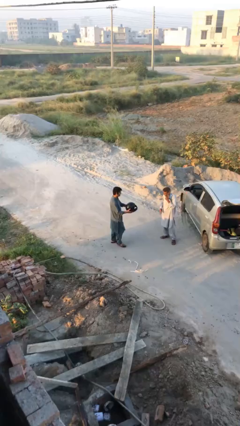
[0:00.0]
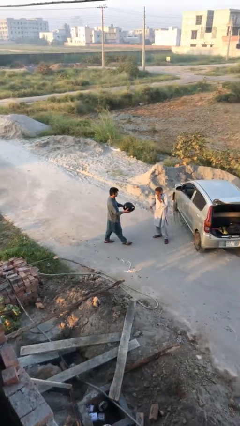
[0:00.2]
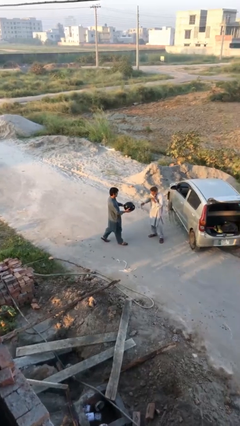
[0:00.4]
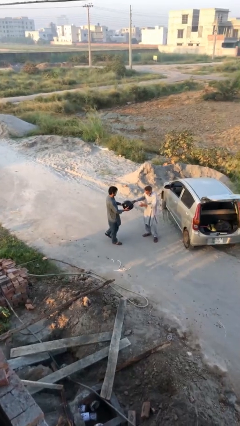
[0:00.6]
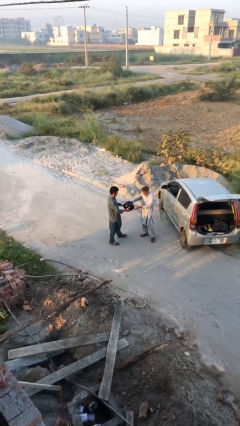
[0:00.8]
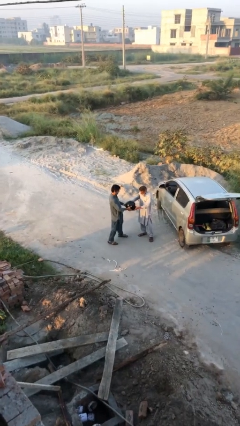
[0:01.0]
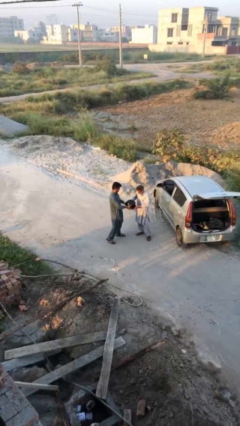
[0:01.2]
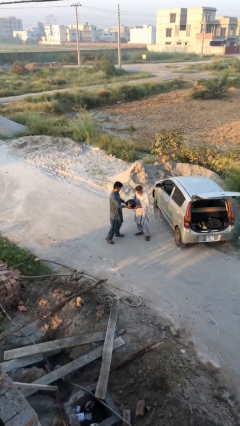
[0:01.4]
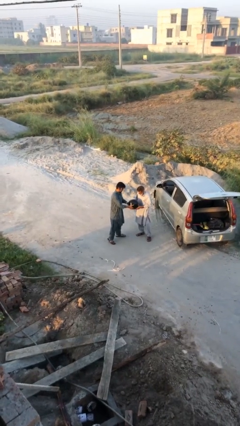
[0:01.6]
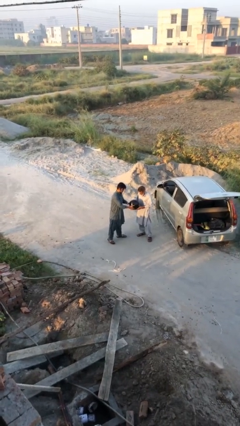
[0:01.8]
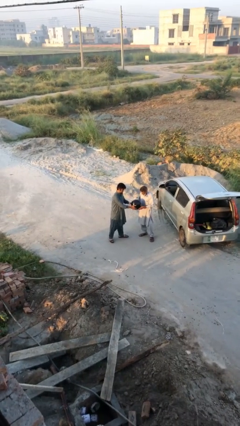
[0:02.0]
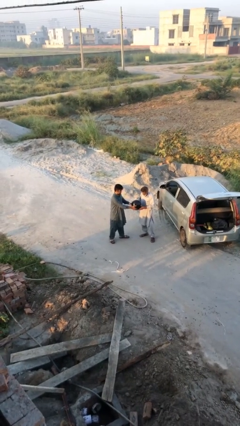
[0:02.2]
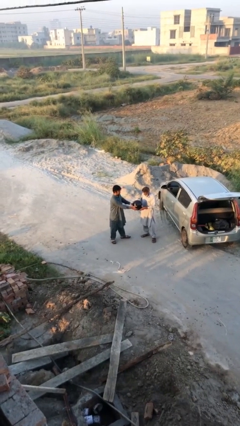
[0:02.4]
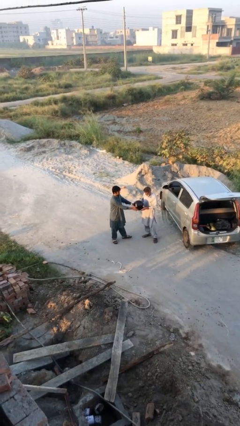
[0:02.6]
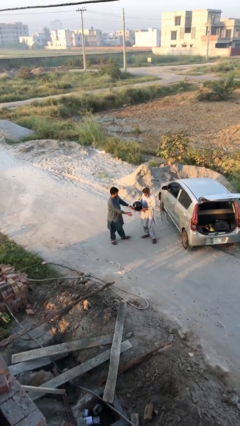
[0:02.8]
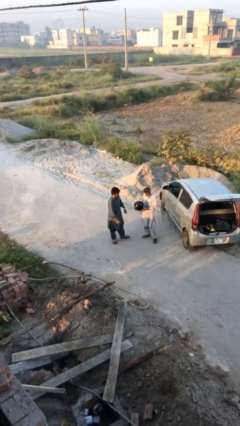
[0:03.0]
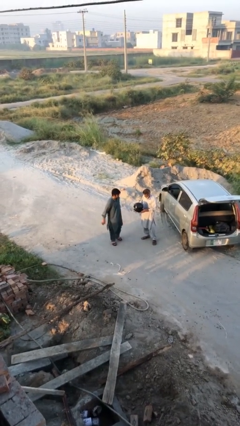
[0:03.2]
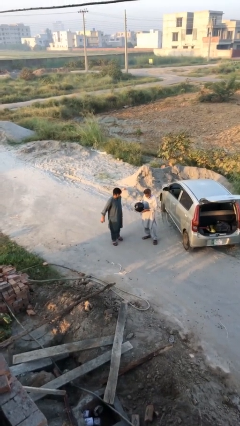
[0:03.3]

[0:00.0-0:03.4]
person transfers object to person

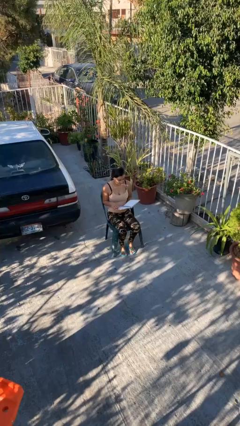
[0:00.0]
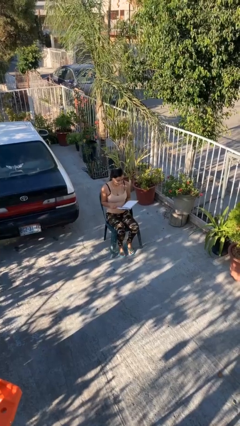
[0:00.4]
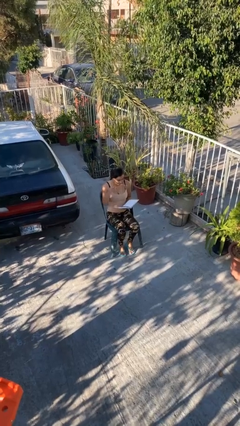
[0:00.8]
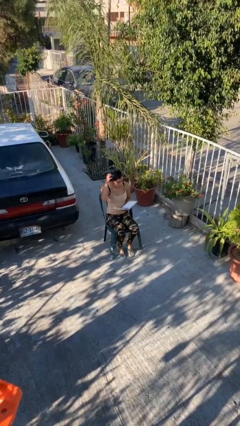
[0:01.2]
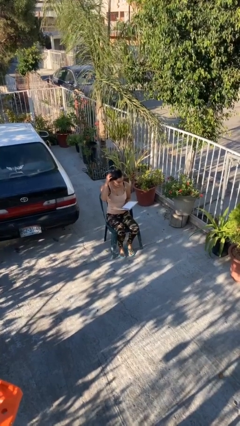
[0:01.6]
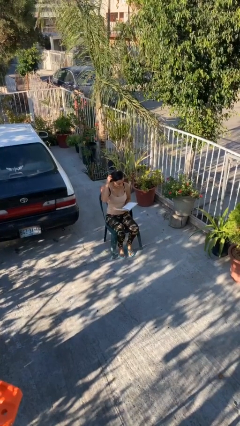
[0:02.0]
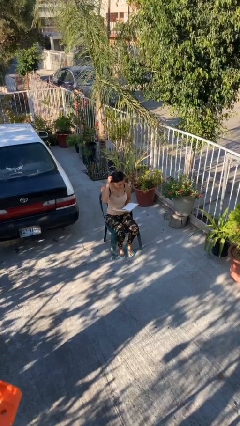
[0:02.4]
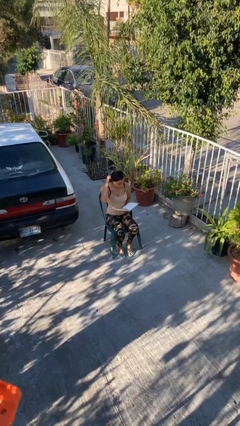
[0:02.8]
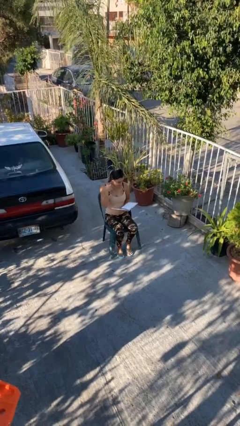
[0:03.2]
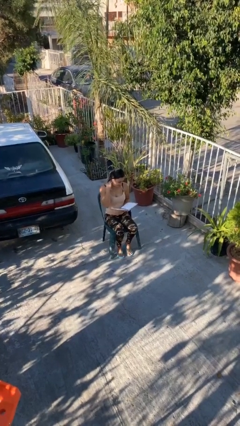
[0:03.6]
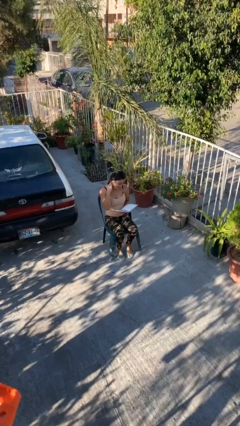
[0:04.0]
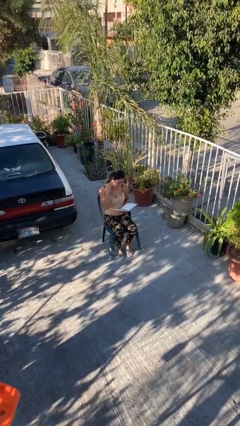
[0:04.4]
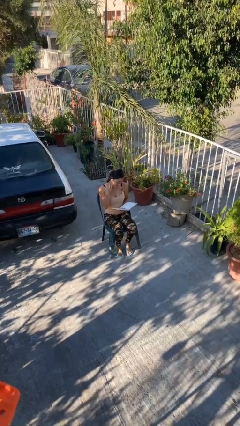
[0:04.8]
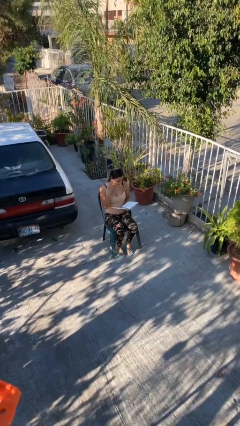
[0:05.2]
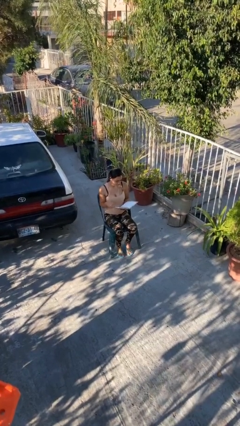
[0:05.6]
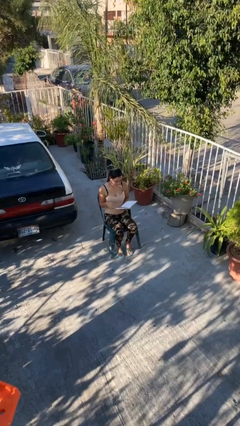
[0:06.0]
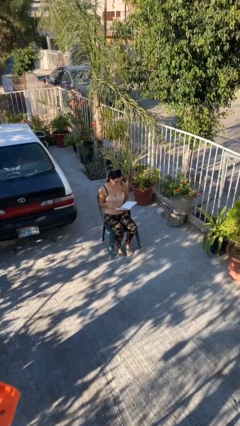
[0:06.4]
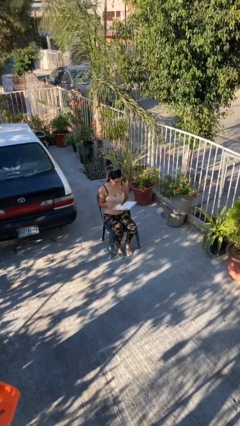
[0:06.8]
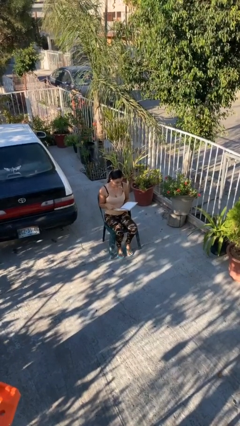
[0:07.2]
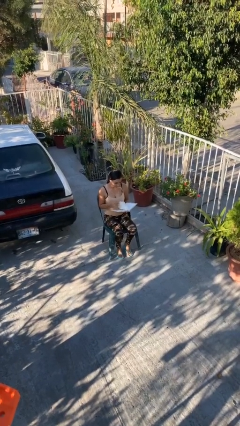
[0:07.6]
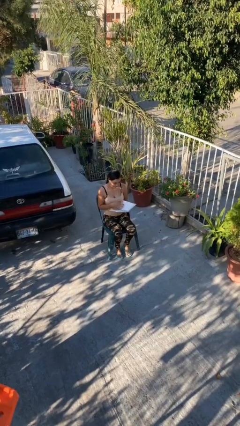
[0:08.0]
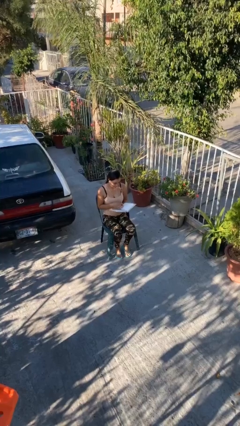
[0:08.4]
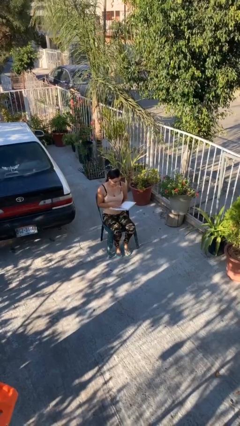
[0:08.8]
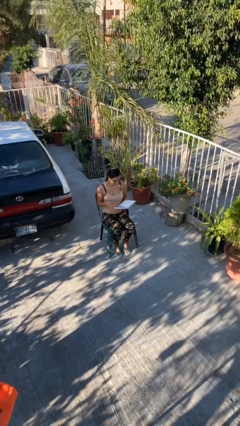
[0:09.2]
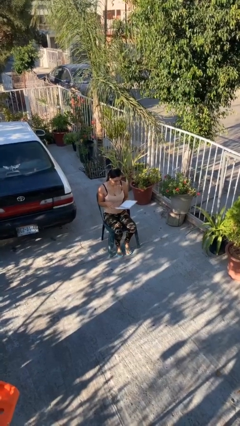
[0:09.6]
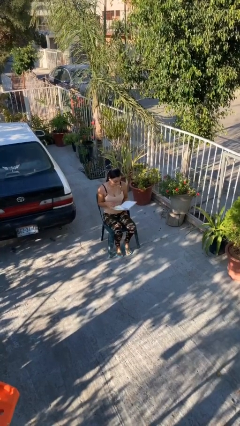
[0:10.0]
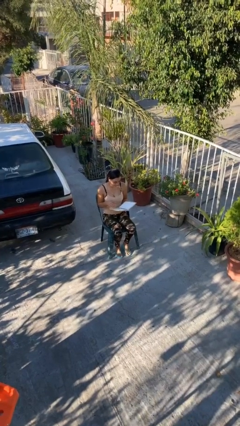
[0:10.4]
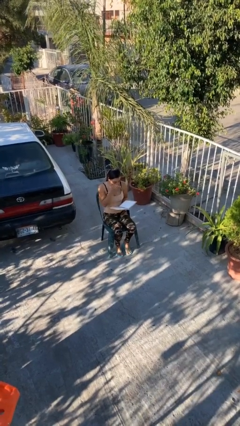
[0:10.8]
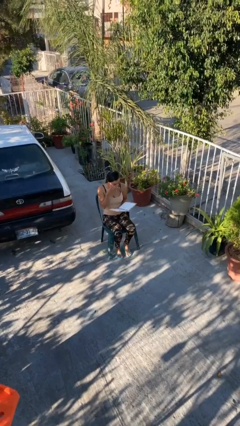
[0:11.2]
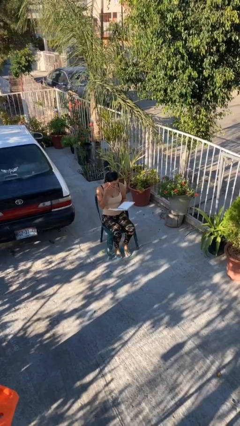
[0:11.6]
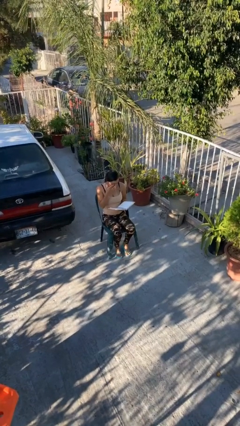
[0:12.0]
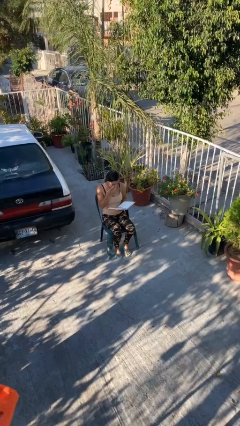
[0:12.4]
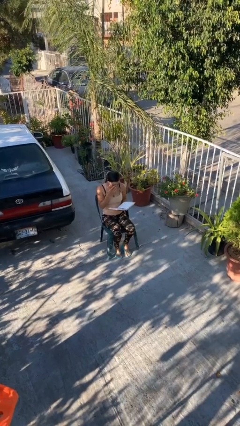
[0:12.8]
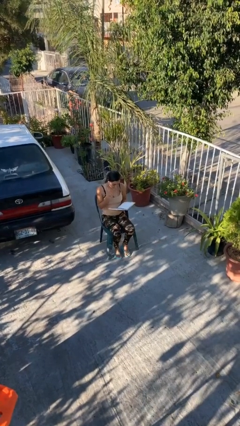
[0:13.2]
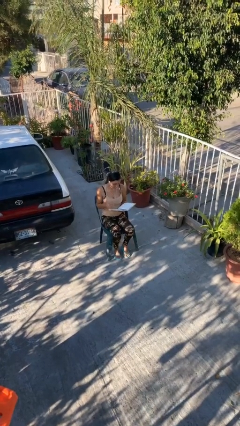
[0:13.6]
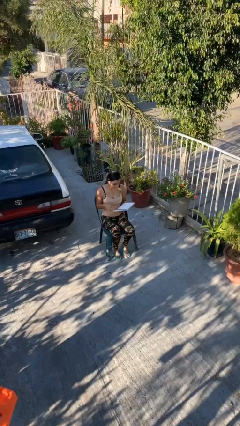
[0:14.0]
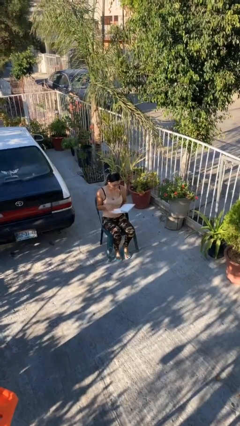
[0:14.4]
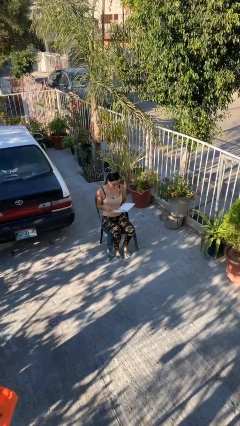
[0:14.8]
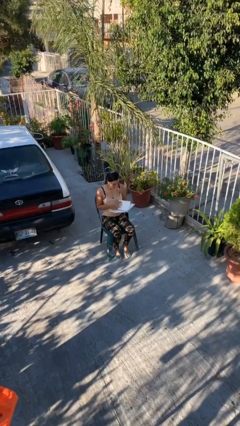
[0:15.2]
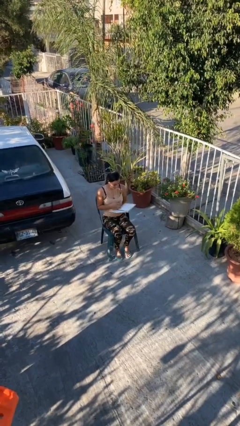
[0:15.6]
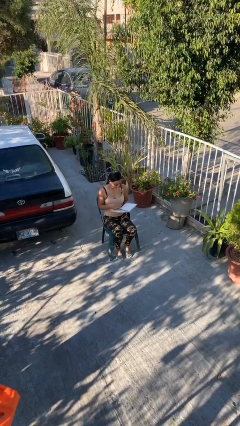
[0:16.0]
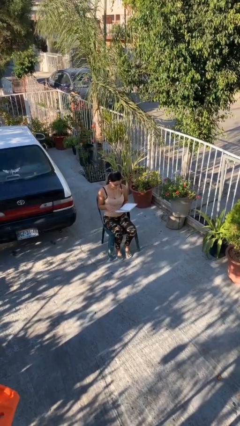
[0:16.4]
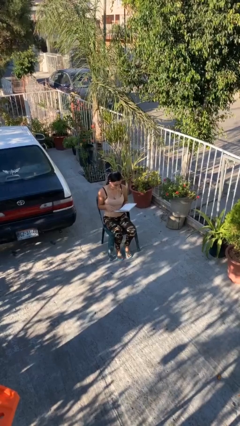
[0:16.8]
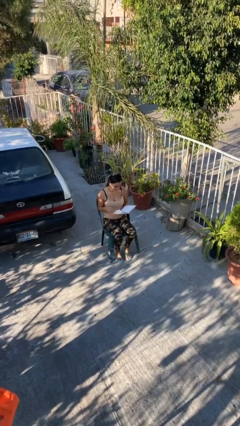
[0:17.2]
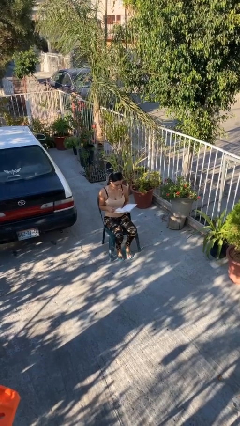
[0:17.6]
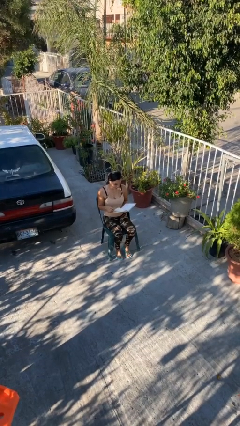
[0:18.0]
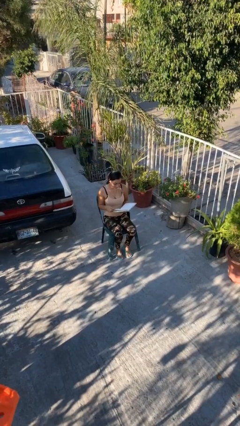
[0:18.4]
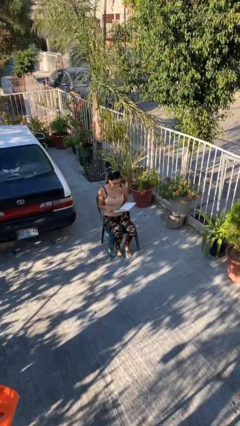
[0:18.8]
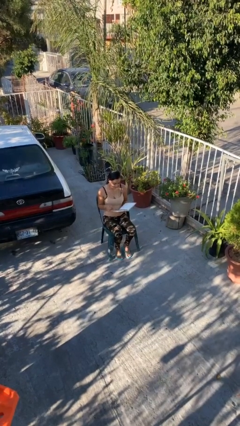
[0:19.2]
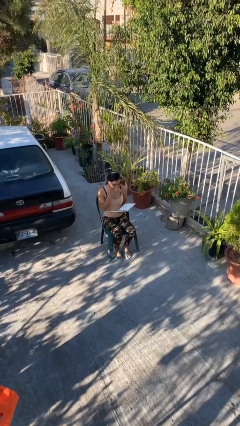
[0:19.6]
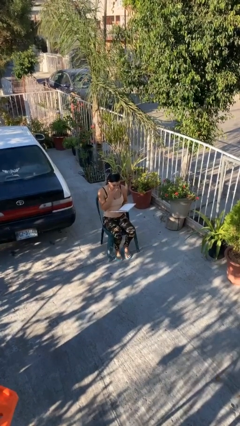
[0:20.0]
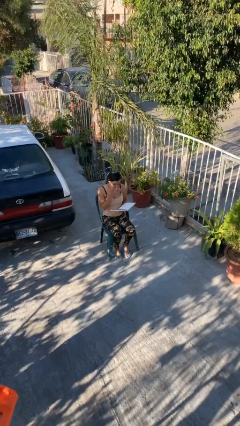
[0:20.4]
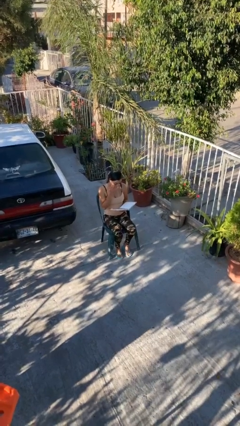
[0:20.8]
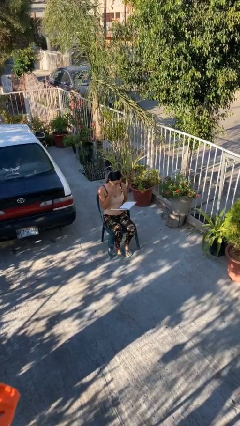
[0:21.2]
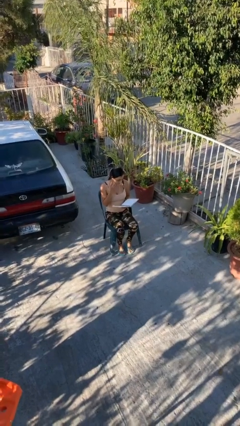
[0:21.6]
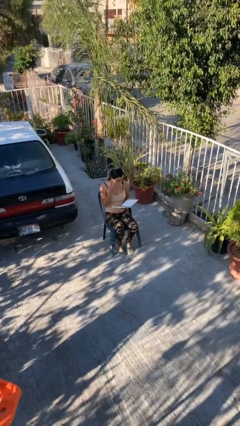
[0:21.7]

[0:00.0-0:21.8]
person reads document

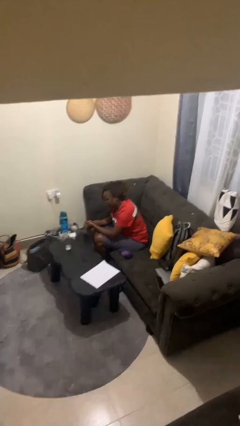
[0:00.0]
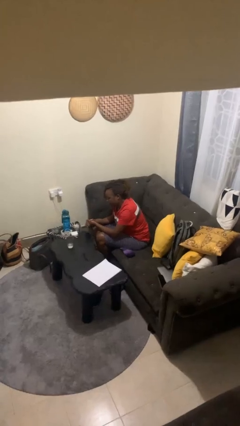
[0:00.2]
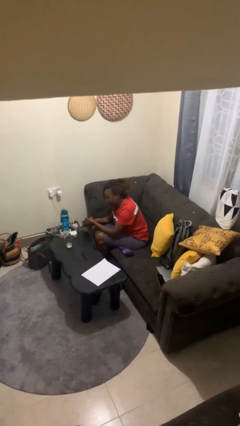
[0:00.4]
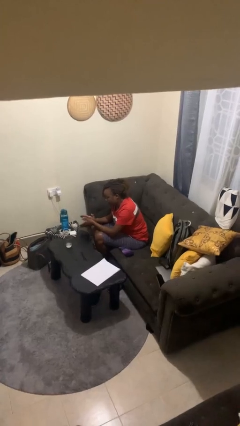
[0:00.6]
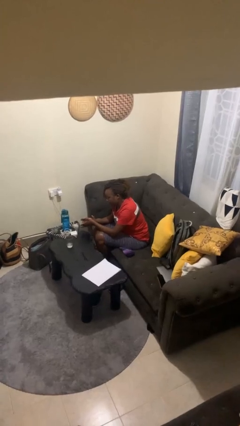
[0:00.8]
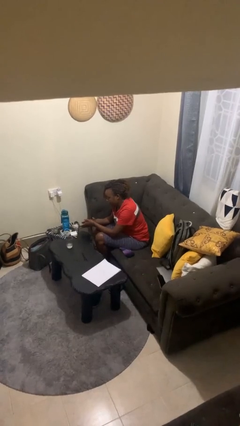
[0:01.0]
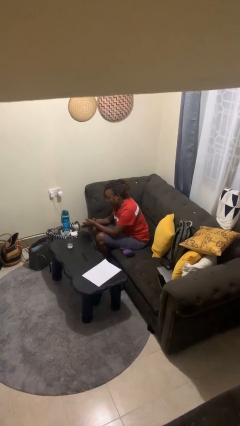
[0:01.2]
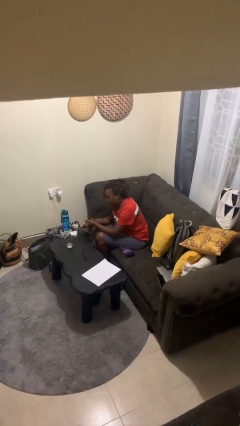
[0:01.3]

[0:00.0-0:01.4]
person claps hands

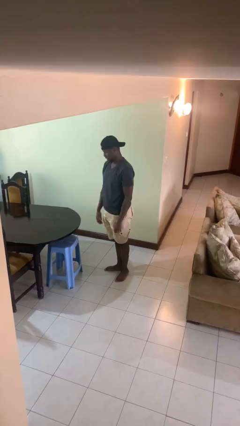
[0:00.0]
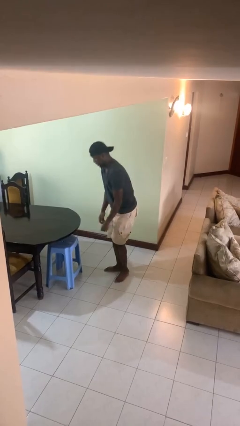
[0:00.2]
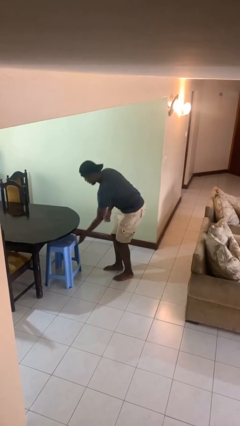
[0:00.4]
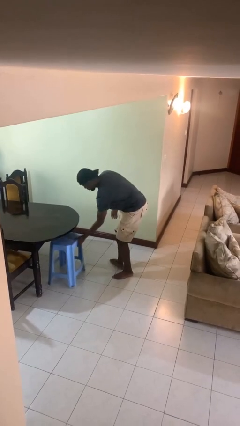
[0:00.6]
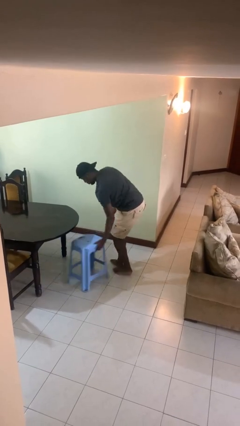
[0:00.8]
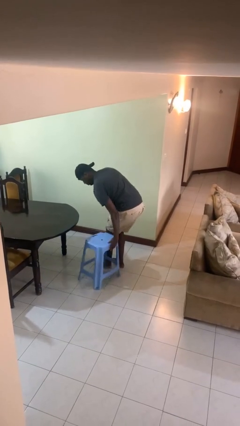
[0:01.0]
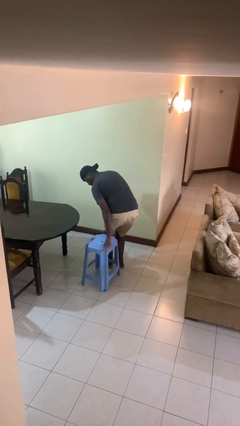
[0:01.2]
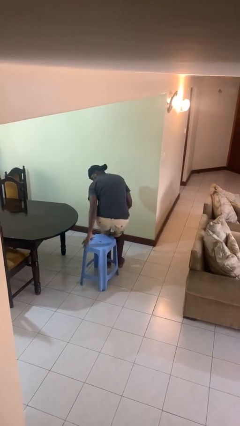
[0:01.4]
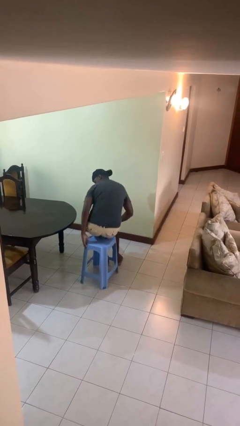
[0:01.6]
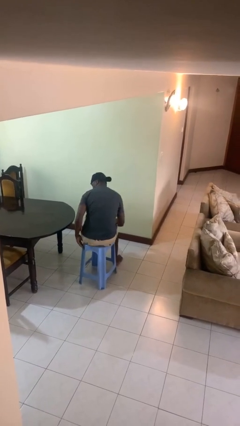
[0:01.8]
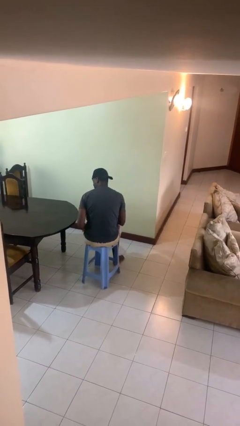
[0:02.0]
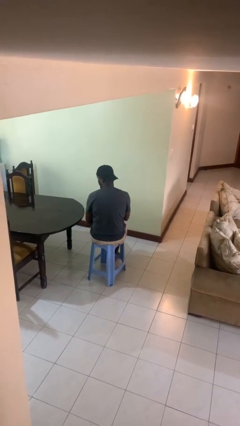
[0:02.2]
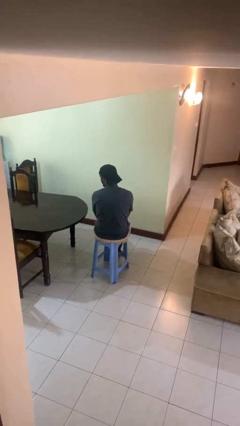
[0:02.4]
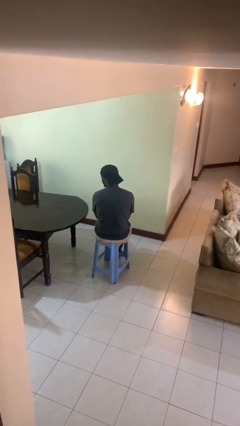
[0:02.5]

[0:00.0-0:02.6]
person sits down
